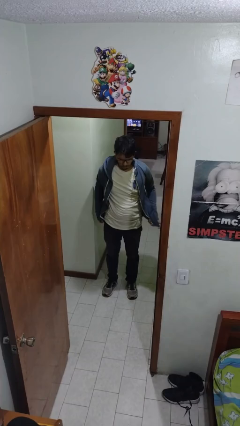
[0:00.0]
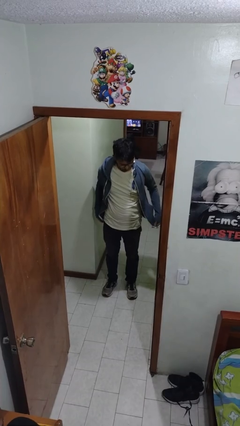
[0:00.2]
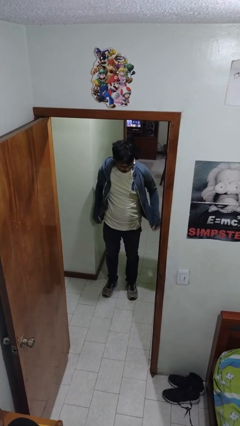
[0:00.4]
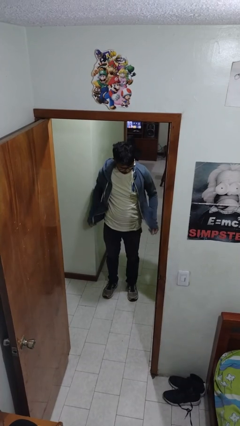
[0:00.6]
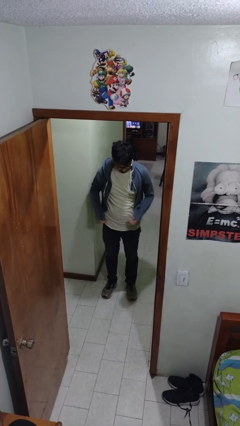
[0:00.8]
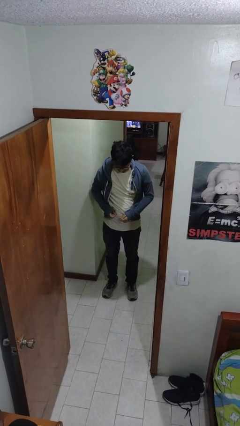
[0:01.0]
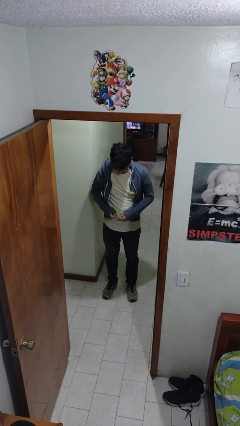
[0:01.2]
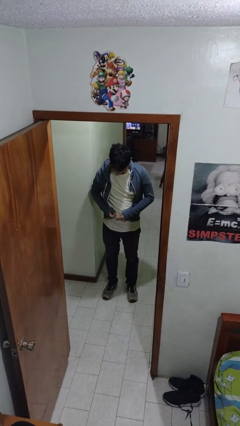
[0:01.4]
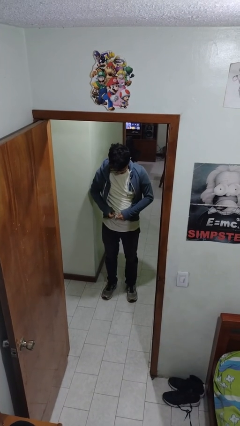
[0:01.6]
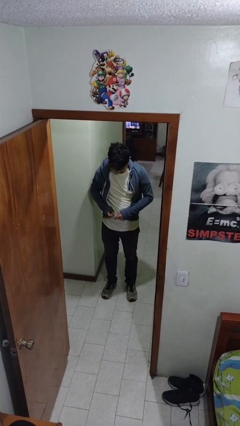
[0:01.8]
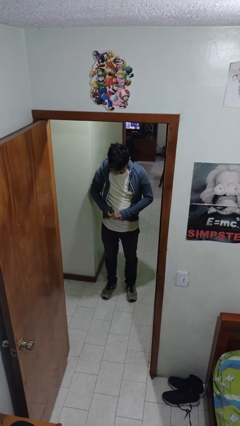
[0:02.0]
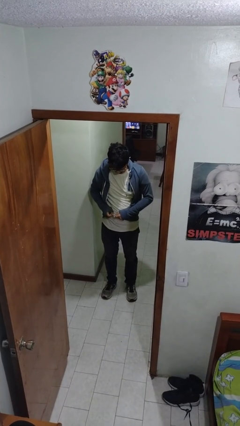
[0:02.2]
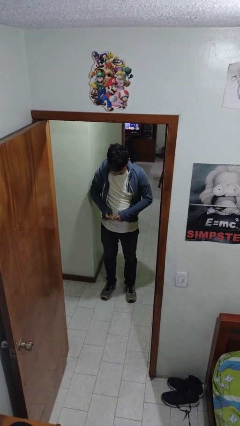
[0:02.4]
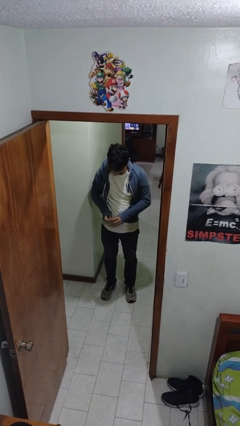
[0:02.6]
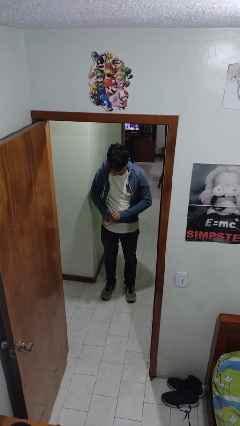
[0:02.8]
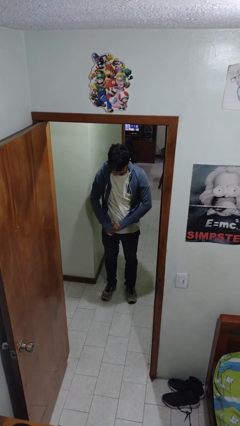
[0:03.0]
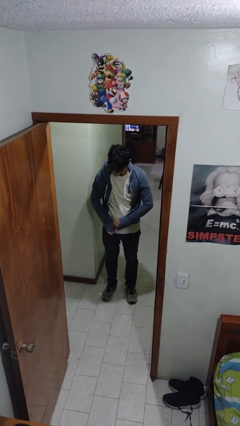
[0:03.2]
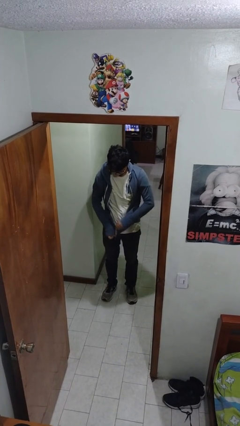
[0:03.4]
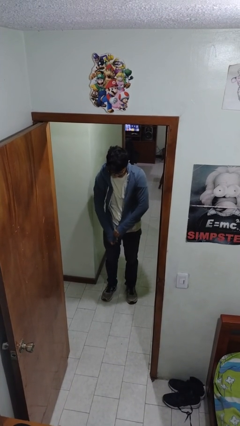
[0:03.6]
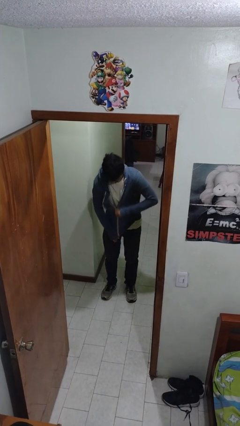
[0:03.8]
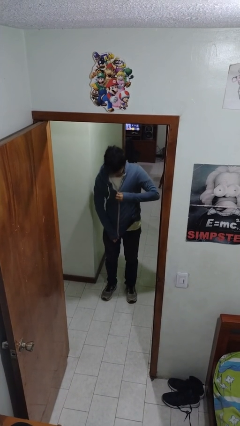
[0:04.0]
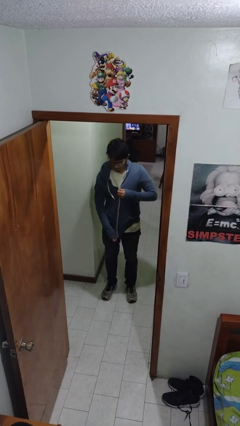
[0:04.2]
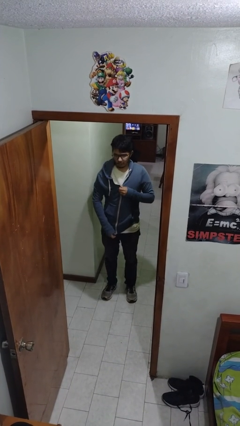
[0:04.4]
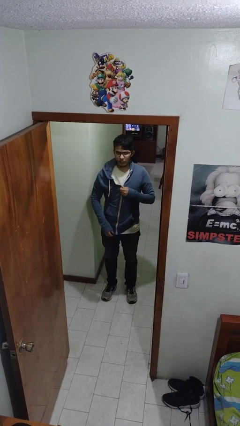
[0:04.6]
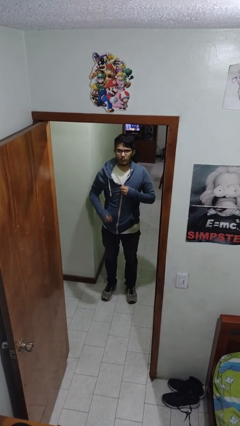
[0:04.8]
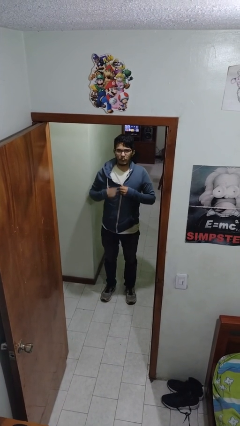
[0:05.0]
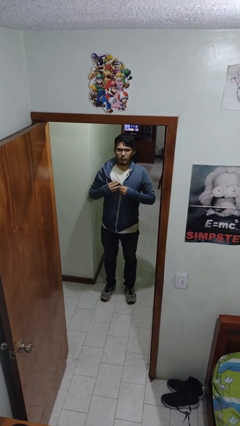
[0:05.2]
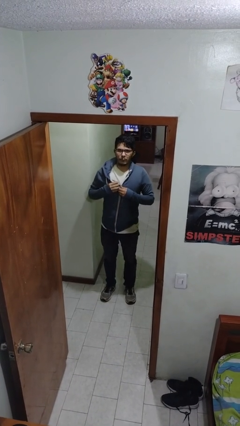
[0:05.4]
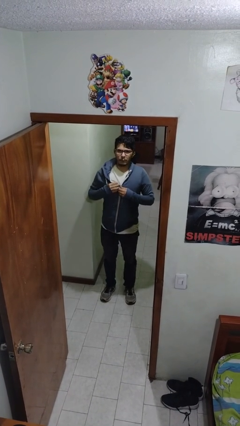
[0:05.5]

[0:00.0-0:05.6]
person zips up jacket

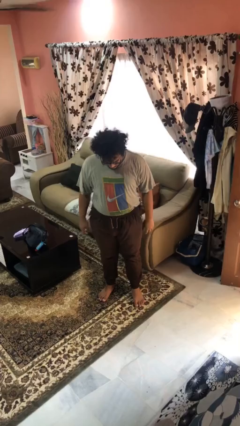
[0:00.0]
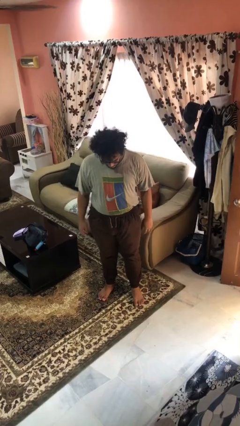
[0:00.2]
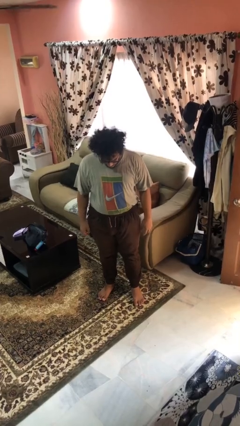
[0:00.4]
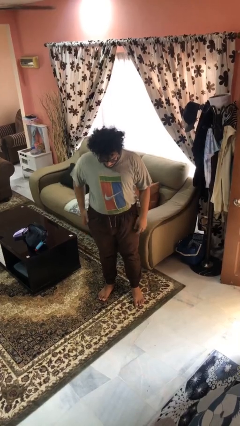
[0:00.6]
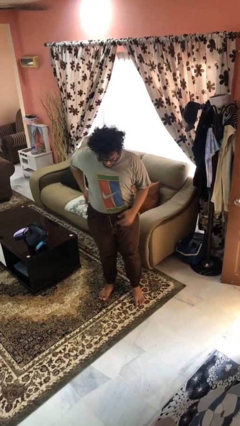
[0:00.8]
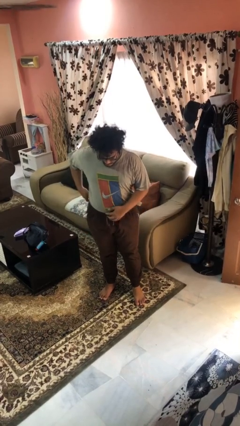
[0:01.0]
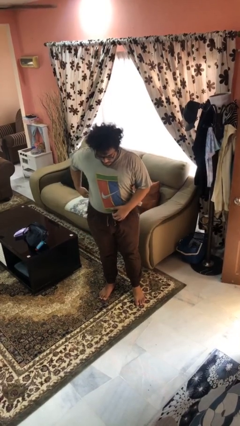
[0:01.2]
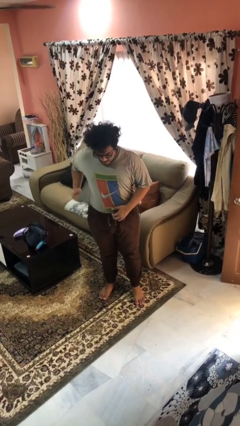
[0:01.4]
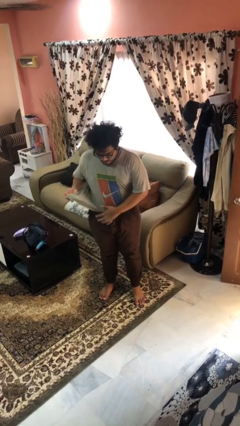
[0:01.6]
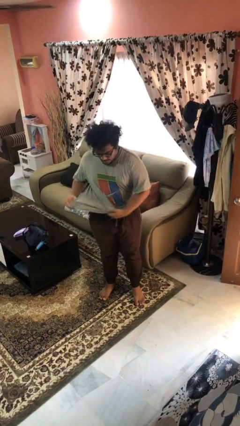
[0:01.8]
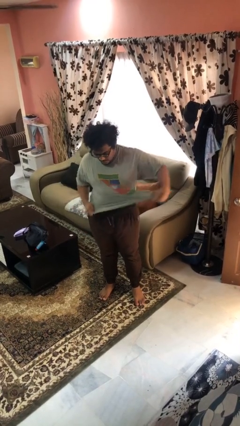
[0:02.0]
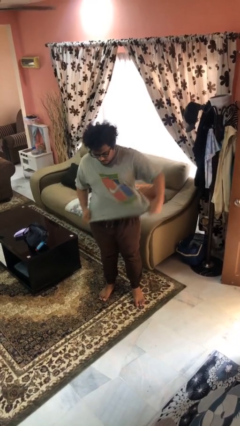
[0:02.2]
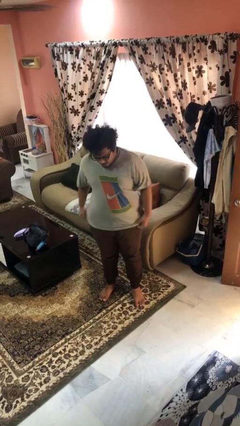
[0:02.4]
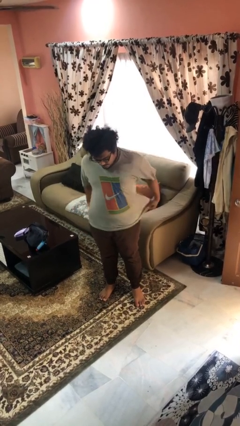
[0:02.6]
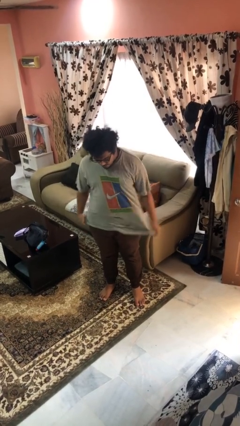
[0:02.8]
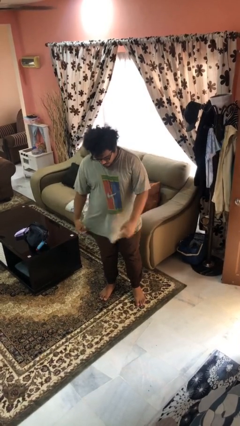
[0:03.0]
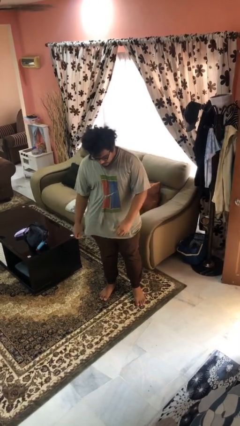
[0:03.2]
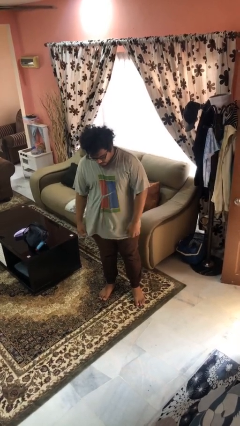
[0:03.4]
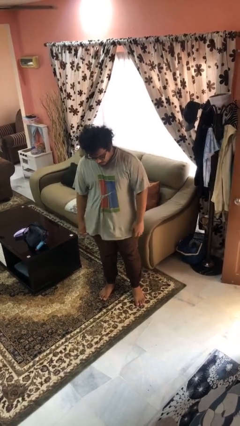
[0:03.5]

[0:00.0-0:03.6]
person untucks shirt

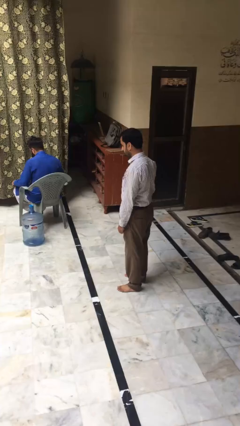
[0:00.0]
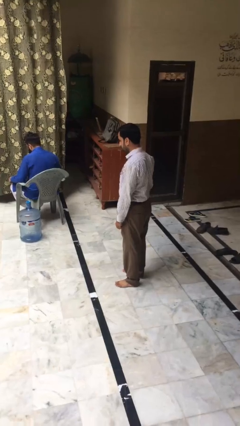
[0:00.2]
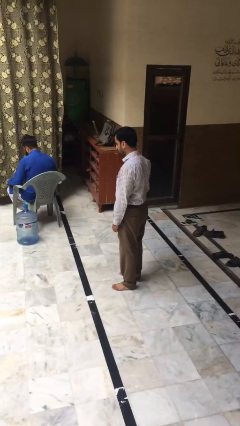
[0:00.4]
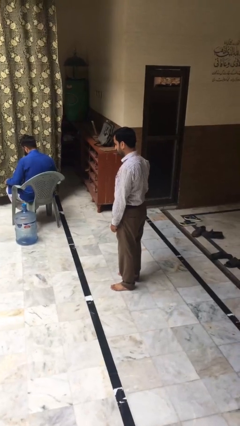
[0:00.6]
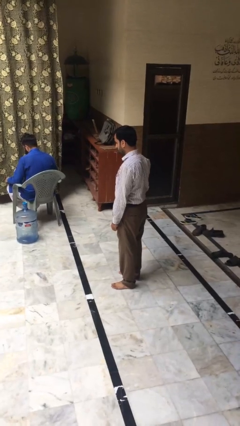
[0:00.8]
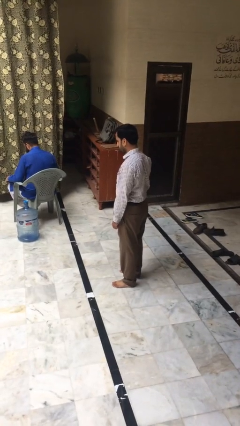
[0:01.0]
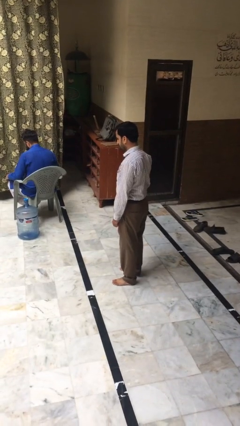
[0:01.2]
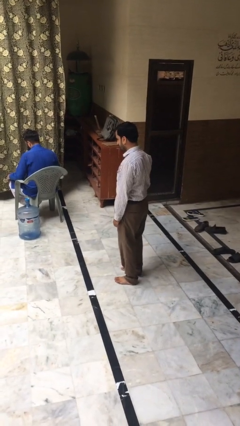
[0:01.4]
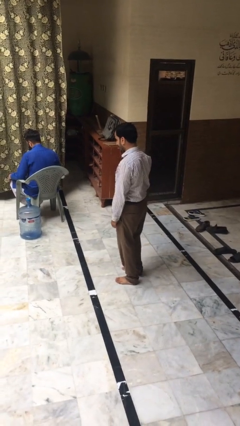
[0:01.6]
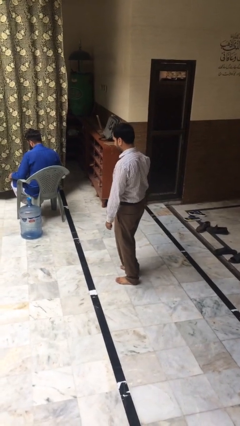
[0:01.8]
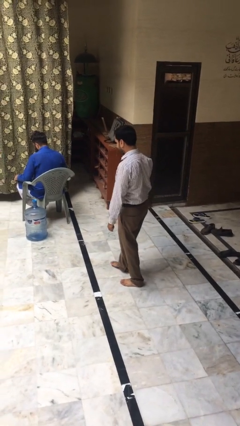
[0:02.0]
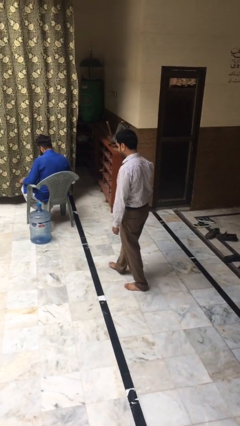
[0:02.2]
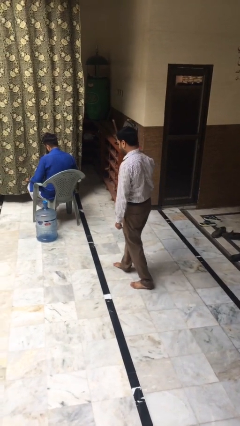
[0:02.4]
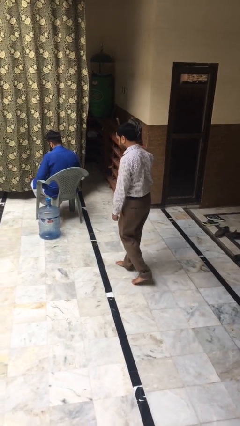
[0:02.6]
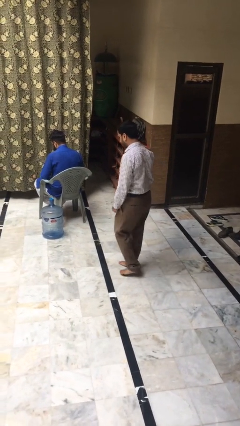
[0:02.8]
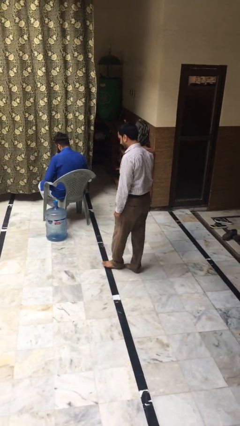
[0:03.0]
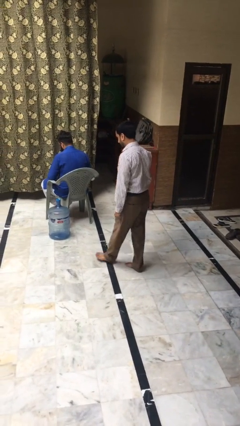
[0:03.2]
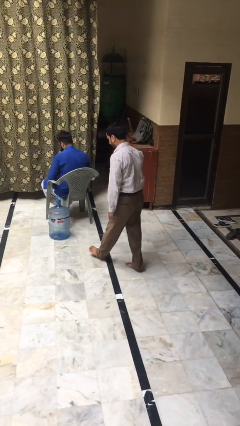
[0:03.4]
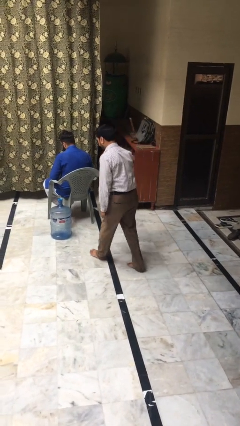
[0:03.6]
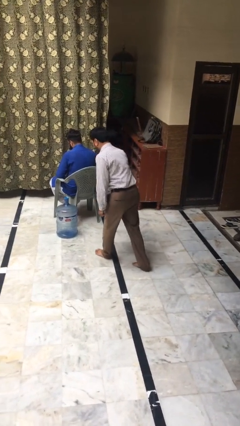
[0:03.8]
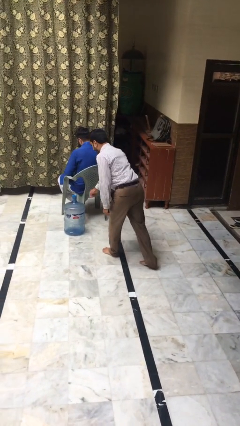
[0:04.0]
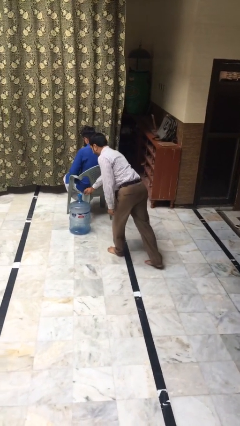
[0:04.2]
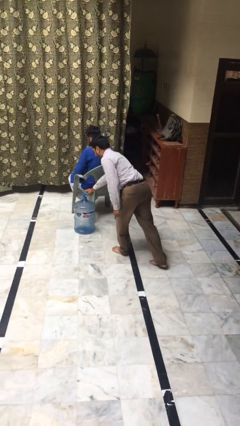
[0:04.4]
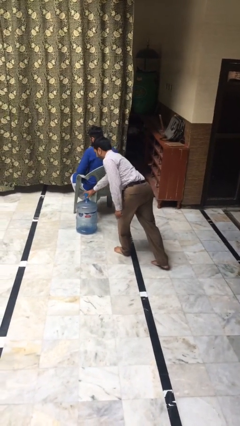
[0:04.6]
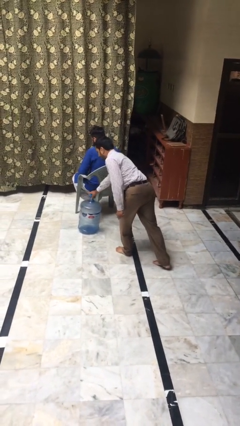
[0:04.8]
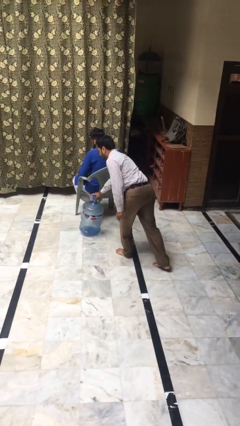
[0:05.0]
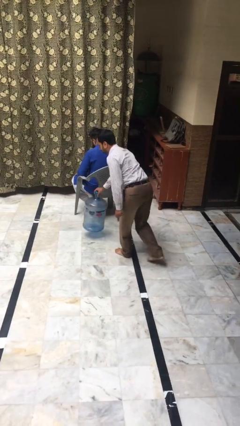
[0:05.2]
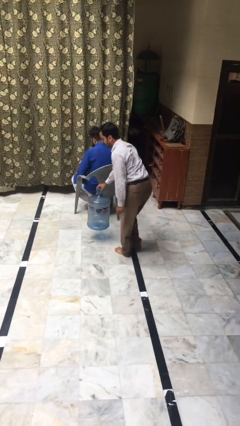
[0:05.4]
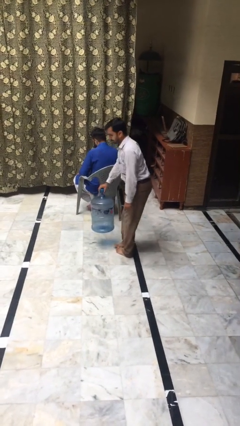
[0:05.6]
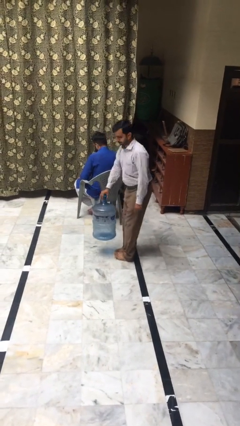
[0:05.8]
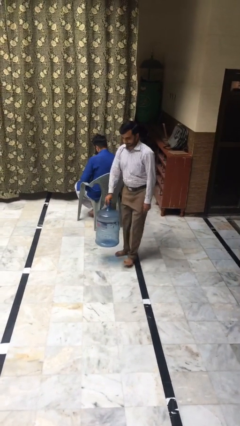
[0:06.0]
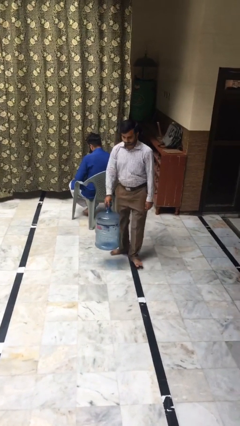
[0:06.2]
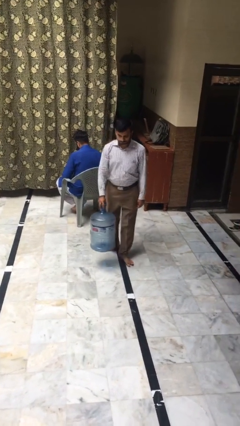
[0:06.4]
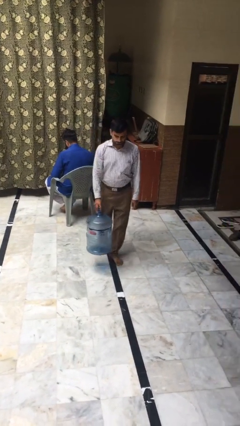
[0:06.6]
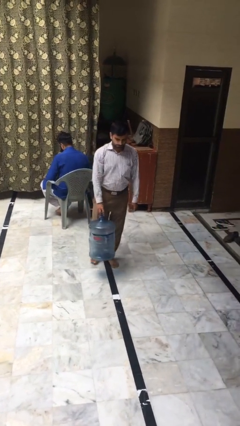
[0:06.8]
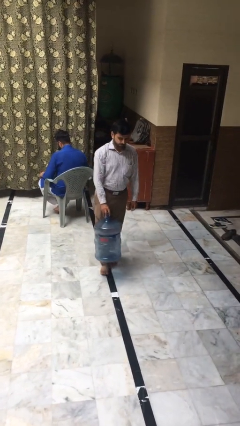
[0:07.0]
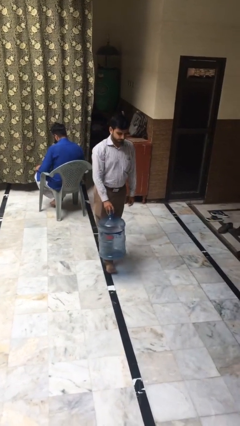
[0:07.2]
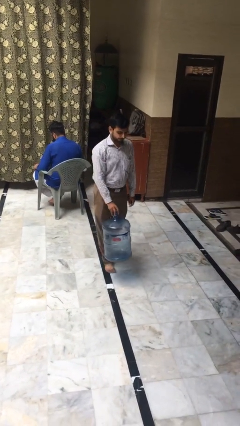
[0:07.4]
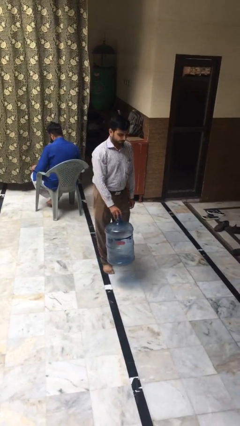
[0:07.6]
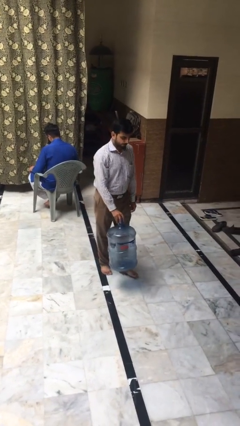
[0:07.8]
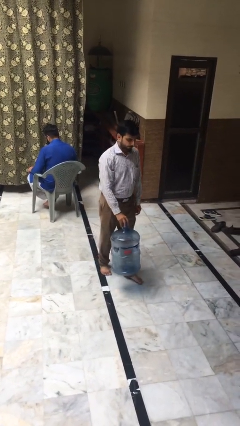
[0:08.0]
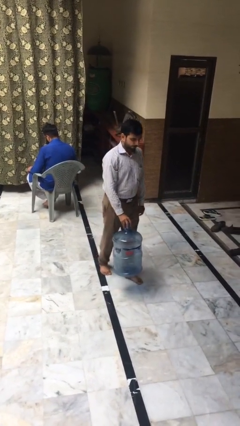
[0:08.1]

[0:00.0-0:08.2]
person steals object from person

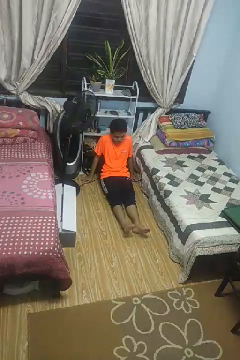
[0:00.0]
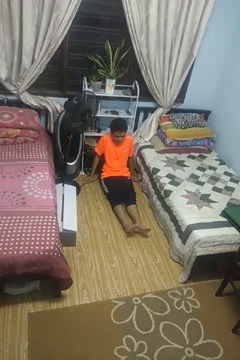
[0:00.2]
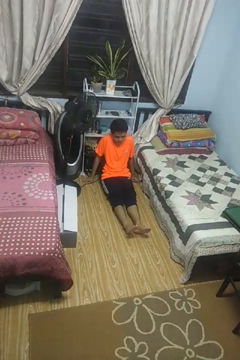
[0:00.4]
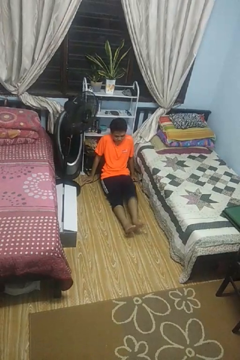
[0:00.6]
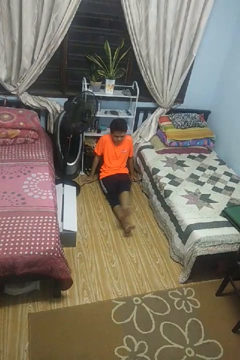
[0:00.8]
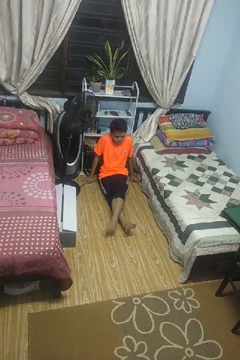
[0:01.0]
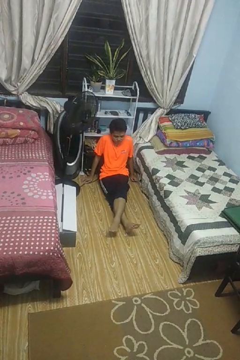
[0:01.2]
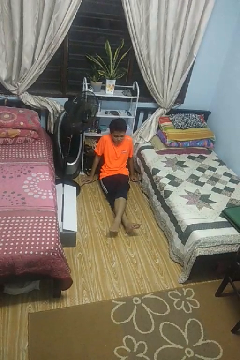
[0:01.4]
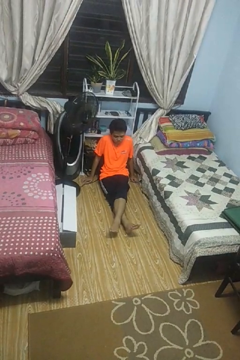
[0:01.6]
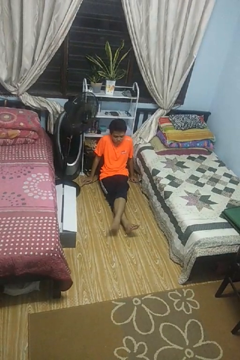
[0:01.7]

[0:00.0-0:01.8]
person crosses legs
